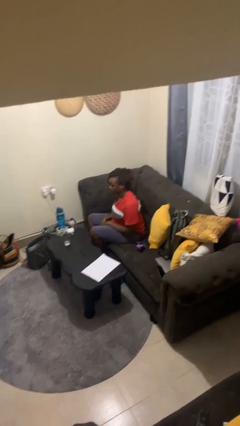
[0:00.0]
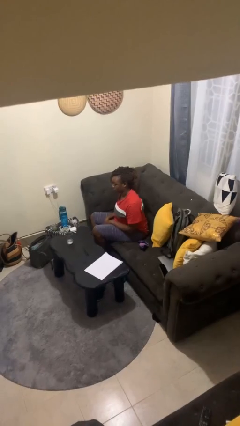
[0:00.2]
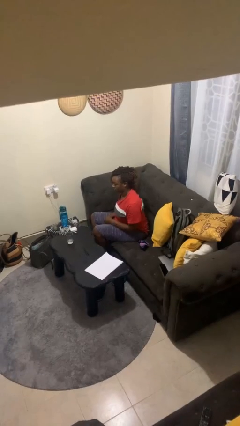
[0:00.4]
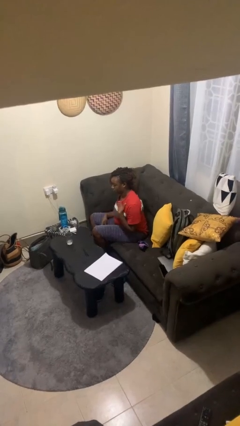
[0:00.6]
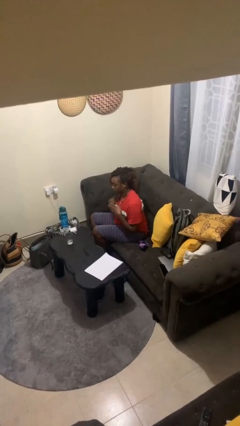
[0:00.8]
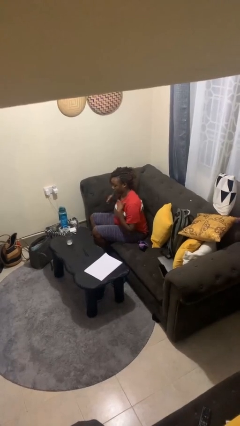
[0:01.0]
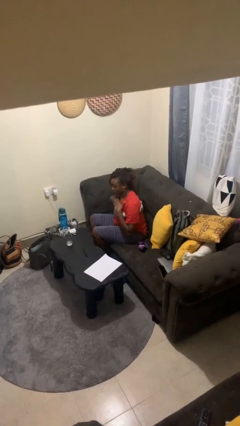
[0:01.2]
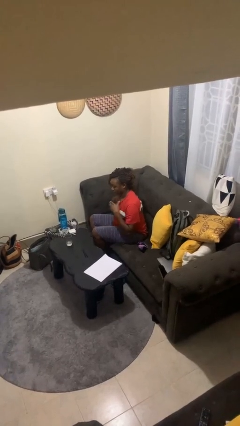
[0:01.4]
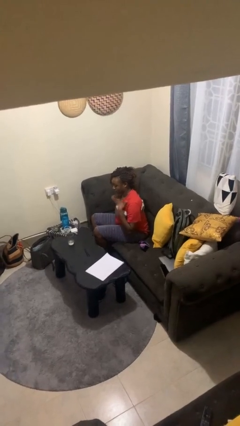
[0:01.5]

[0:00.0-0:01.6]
person drums on chest

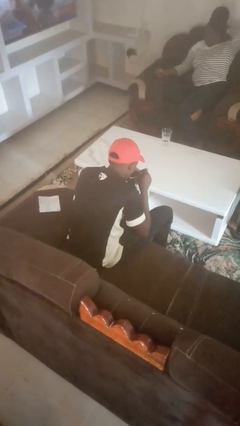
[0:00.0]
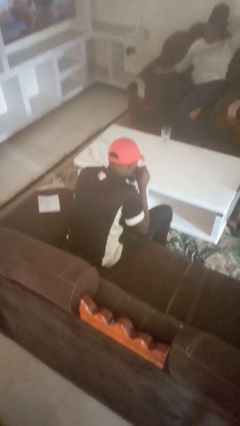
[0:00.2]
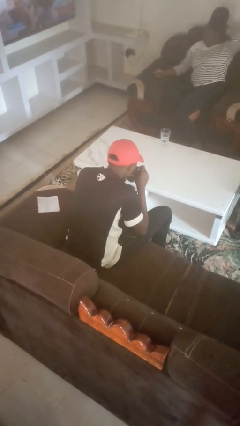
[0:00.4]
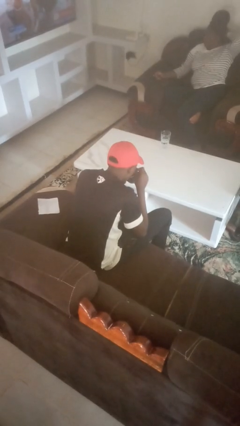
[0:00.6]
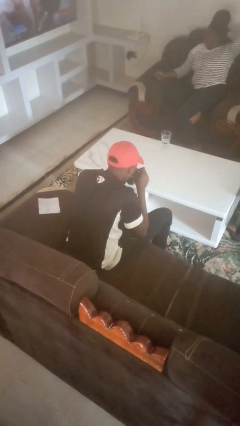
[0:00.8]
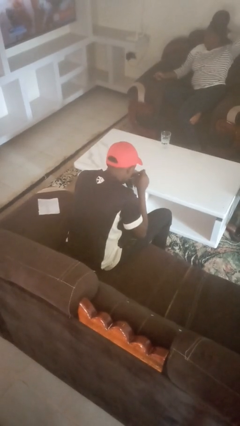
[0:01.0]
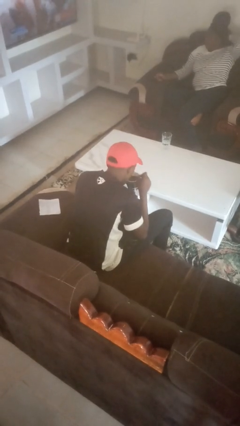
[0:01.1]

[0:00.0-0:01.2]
person drinks from mug

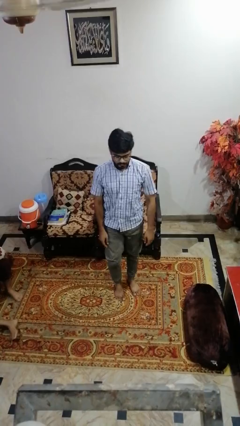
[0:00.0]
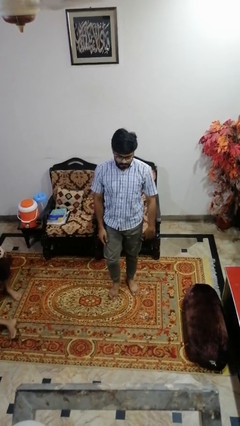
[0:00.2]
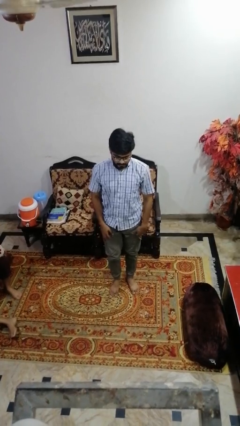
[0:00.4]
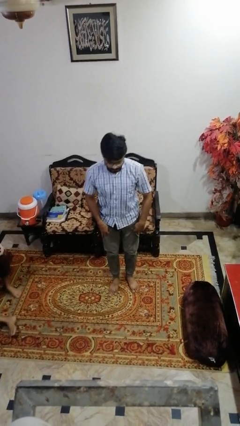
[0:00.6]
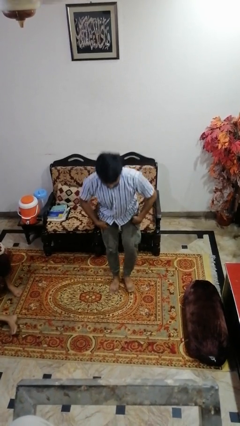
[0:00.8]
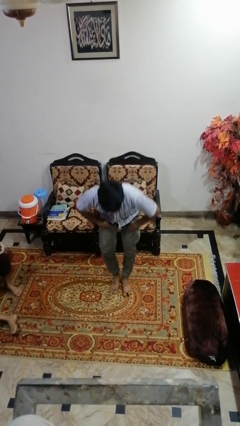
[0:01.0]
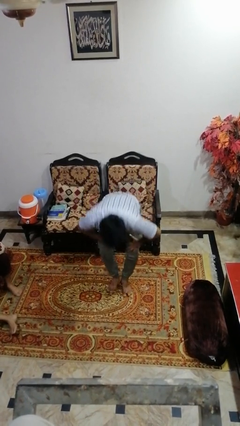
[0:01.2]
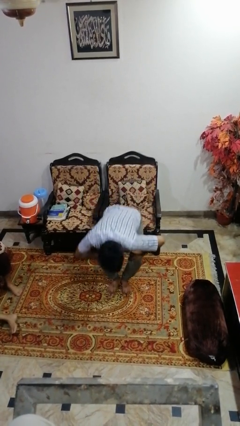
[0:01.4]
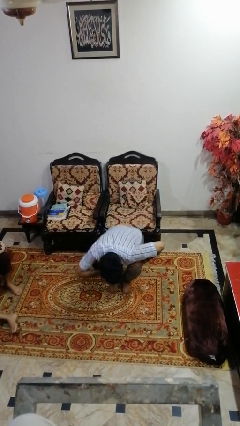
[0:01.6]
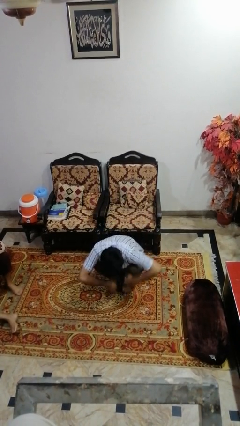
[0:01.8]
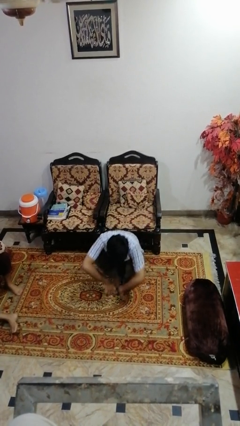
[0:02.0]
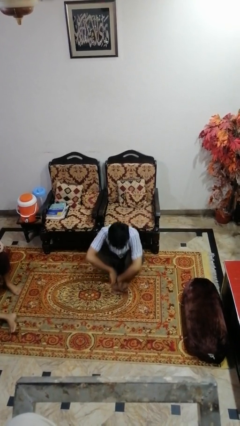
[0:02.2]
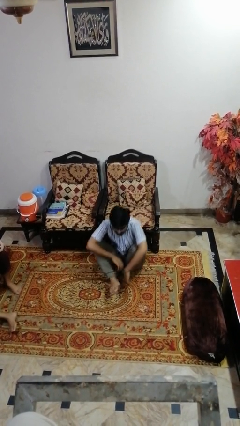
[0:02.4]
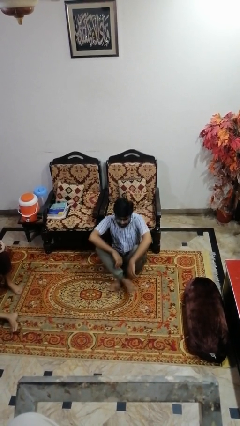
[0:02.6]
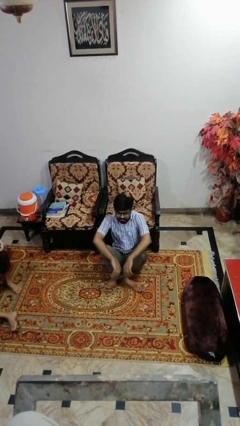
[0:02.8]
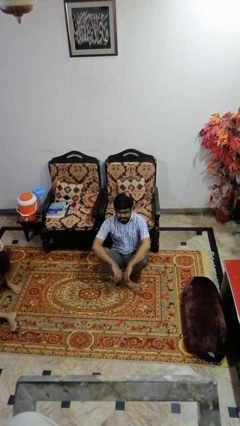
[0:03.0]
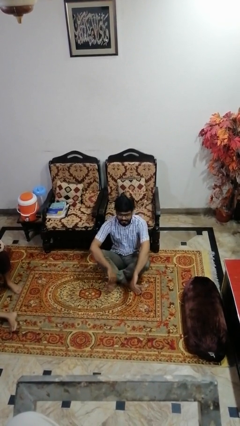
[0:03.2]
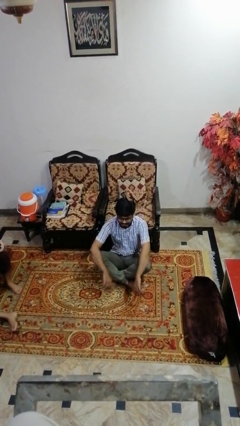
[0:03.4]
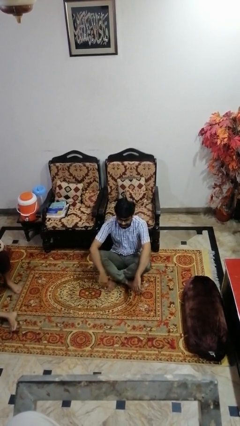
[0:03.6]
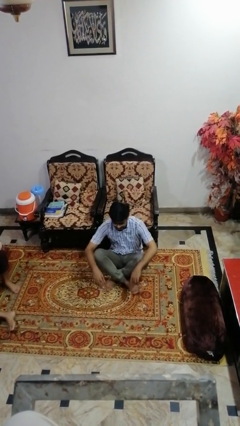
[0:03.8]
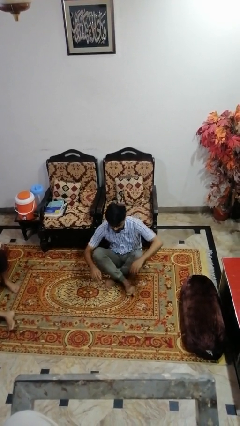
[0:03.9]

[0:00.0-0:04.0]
person sits crisscross

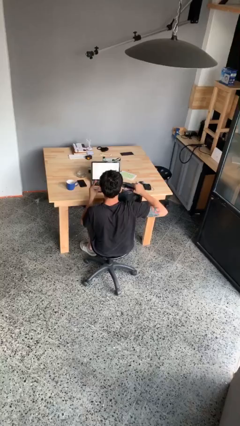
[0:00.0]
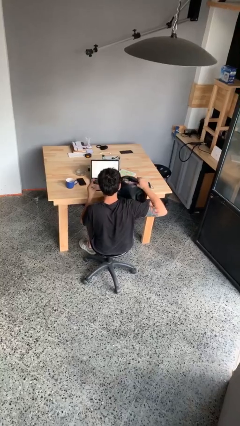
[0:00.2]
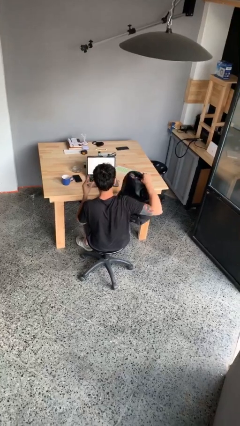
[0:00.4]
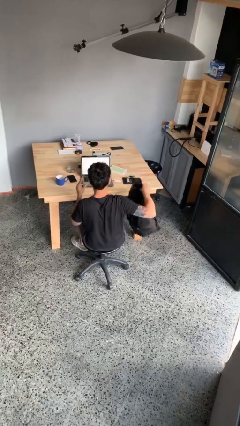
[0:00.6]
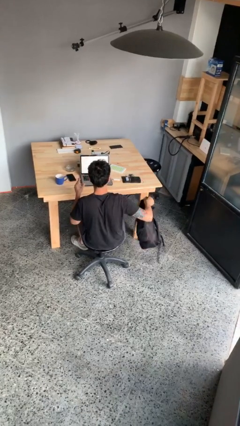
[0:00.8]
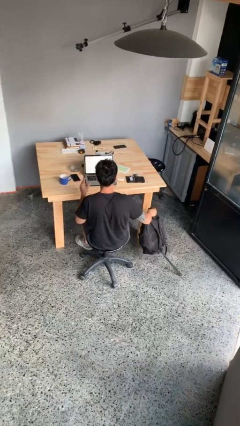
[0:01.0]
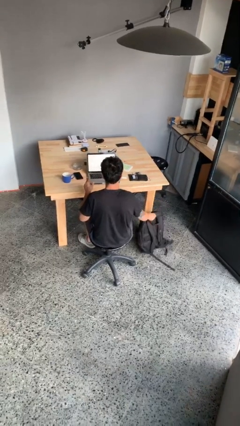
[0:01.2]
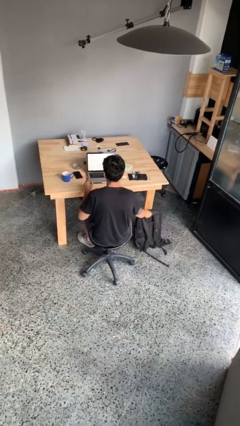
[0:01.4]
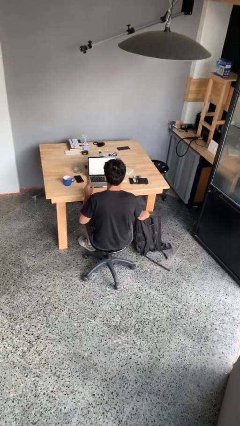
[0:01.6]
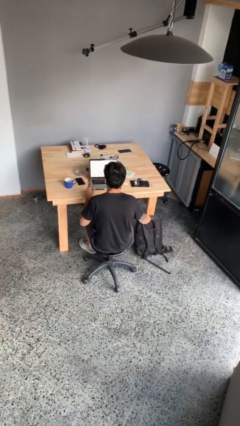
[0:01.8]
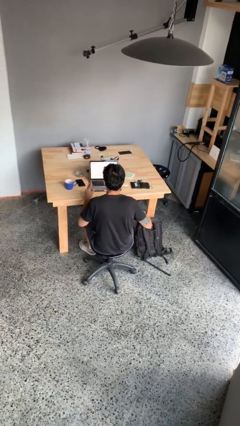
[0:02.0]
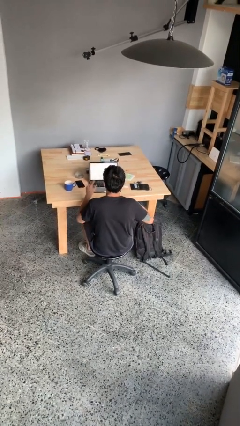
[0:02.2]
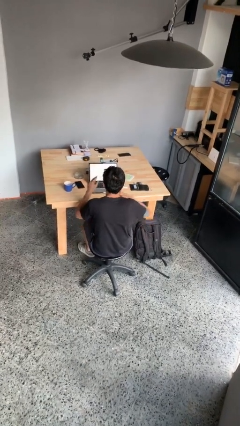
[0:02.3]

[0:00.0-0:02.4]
person puts down object on floor

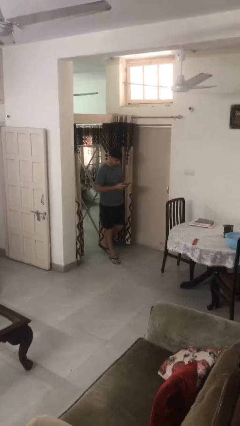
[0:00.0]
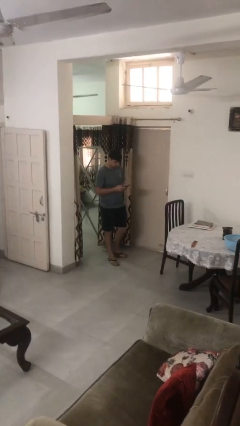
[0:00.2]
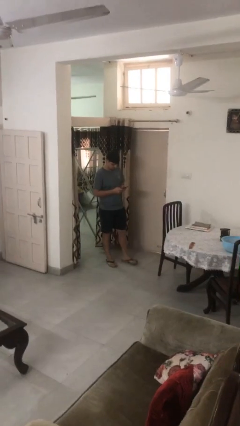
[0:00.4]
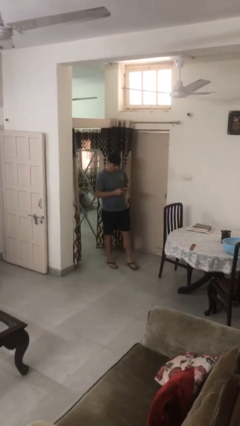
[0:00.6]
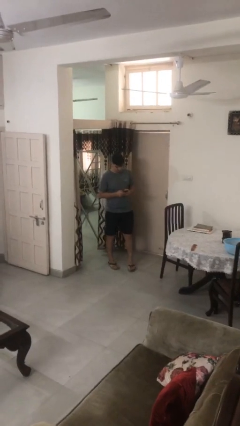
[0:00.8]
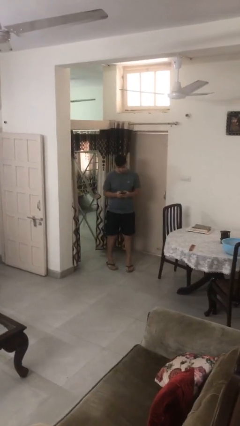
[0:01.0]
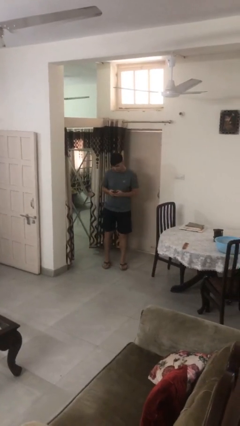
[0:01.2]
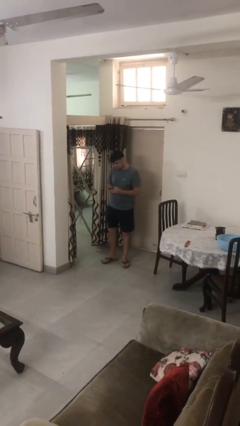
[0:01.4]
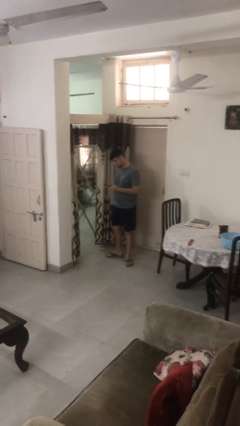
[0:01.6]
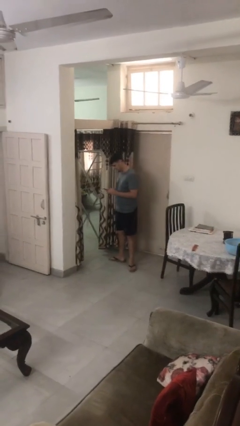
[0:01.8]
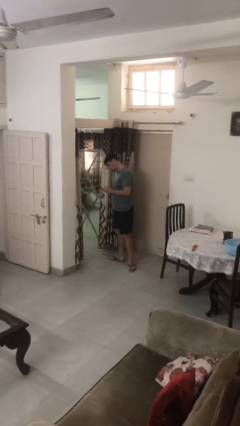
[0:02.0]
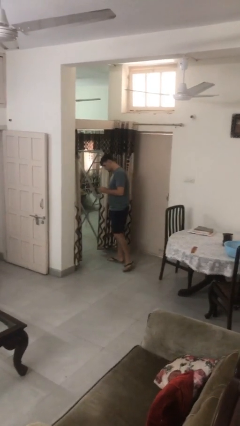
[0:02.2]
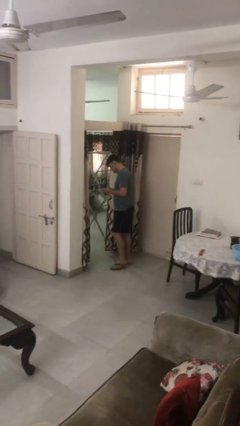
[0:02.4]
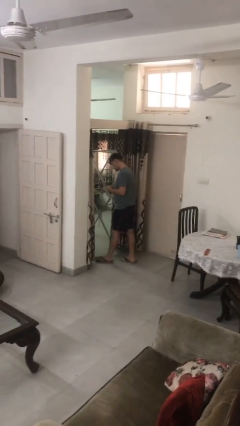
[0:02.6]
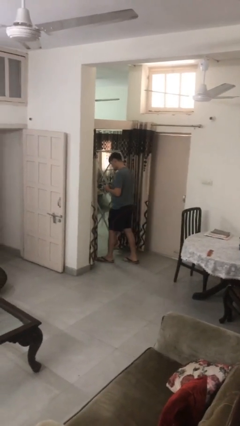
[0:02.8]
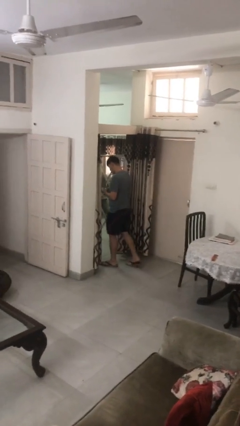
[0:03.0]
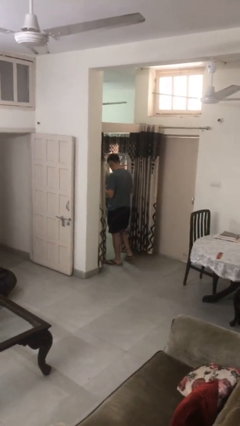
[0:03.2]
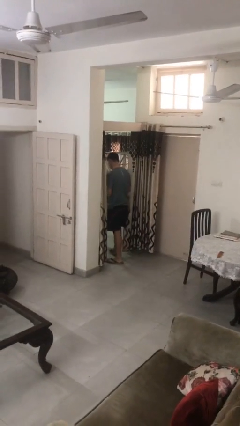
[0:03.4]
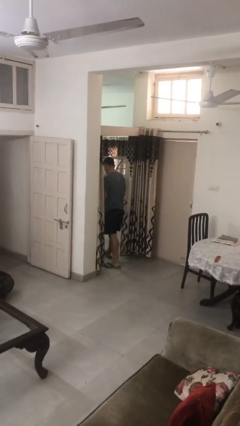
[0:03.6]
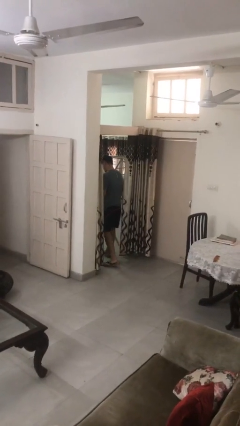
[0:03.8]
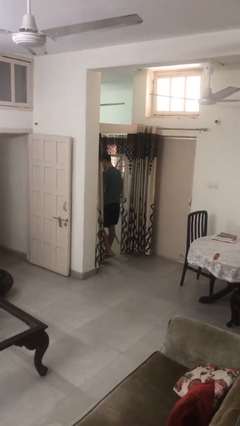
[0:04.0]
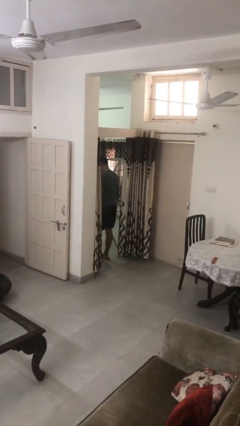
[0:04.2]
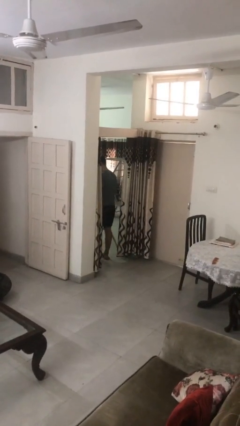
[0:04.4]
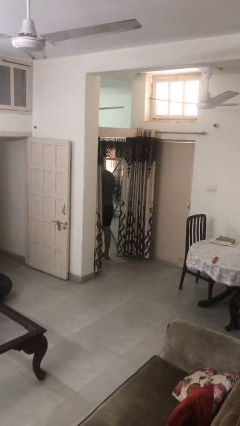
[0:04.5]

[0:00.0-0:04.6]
person exits scene through structure

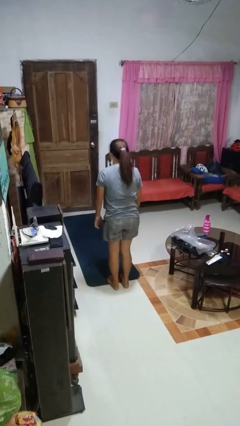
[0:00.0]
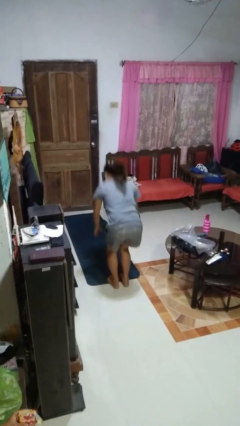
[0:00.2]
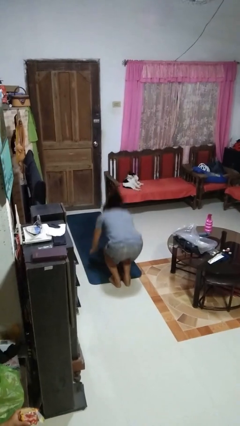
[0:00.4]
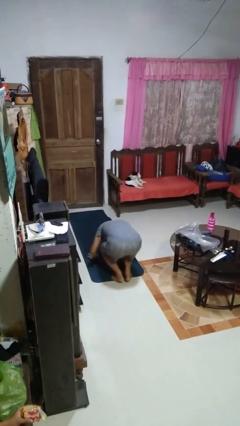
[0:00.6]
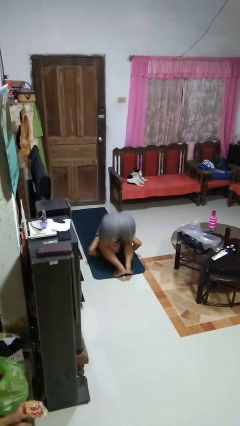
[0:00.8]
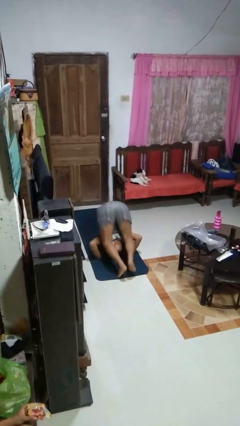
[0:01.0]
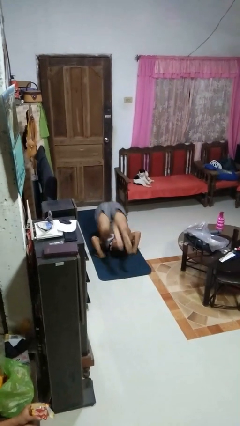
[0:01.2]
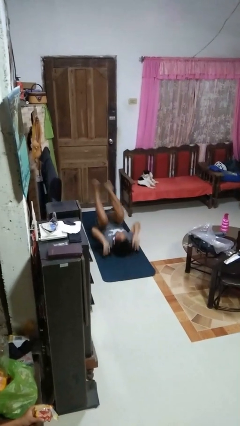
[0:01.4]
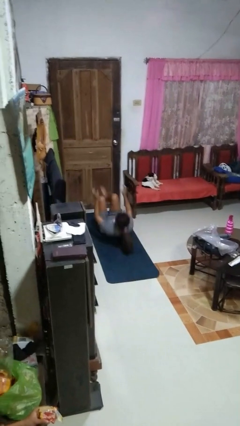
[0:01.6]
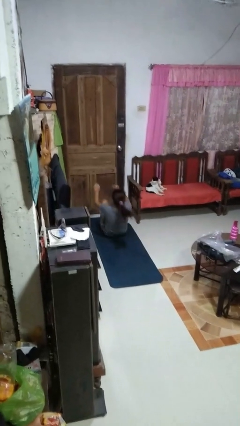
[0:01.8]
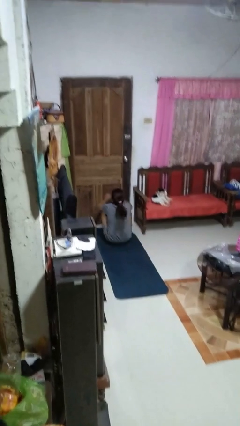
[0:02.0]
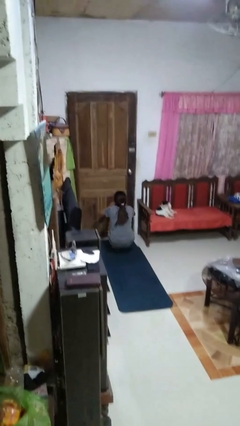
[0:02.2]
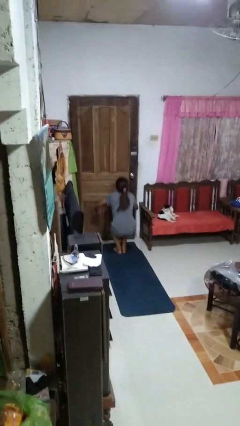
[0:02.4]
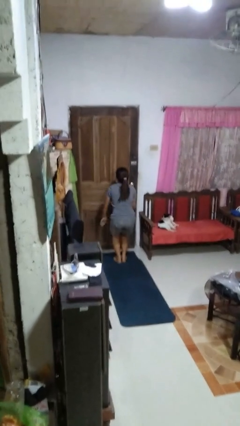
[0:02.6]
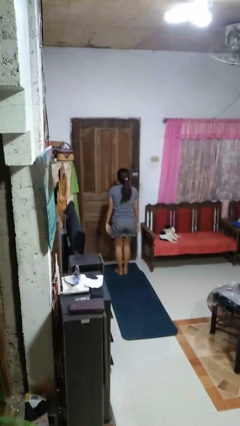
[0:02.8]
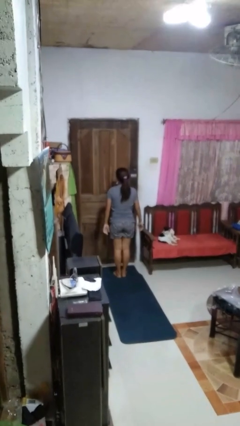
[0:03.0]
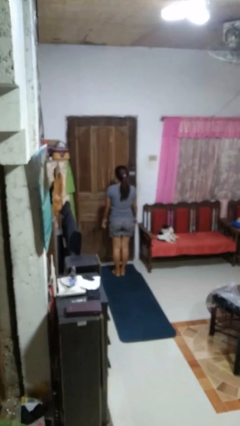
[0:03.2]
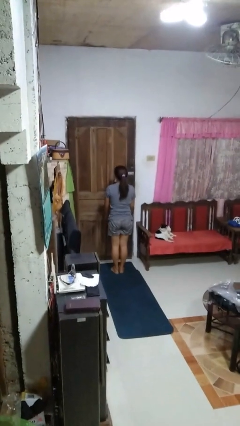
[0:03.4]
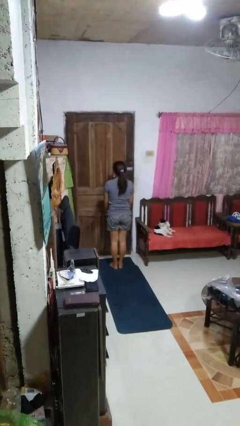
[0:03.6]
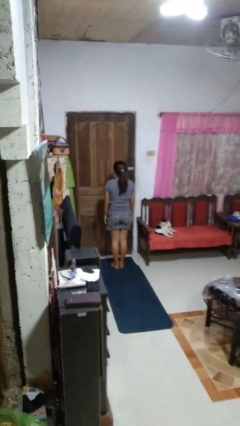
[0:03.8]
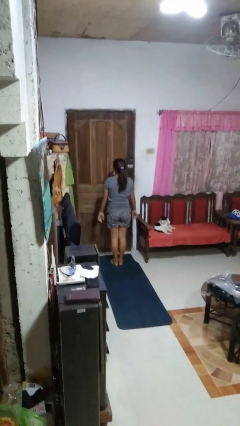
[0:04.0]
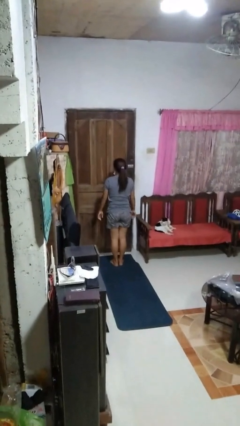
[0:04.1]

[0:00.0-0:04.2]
person somersaults
